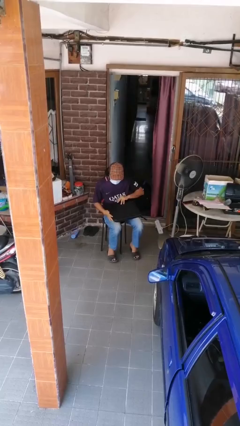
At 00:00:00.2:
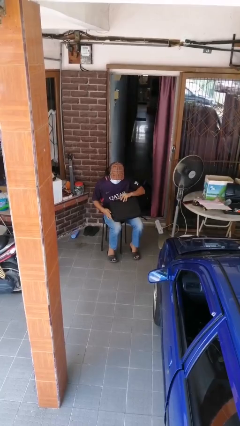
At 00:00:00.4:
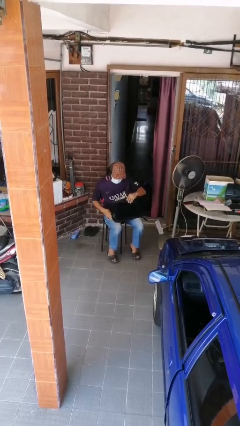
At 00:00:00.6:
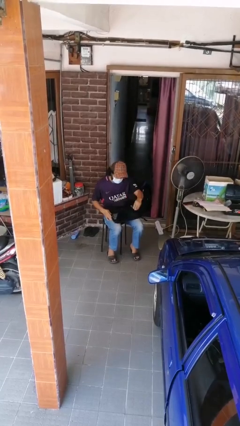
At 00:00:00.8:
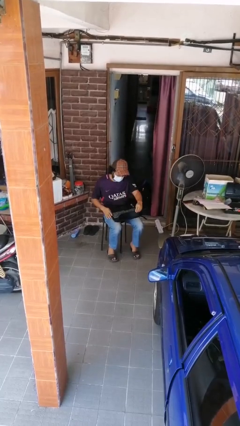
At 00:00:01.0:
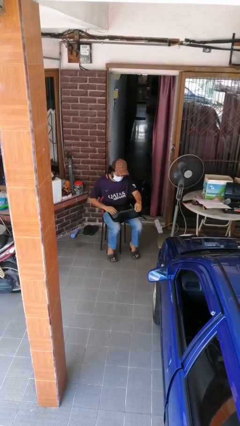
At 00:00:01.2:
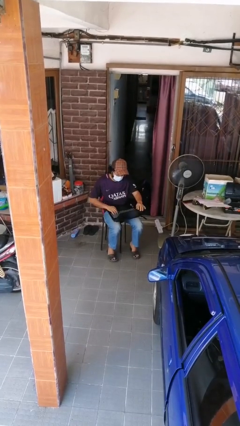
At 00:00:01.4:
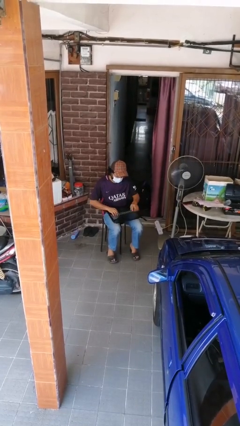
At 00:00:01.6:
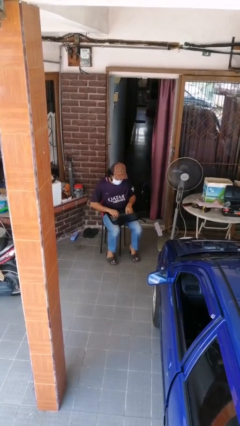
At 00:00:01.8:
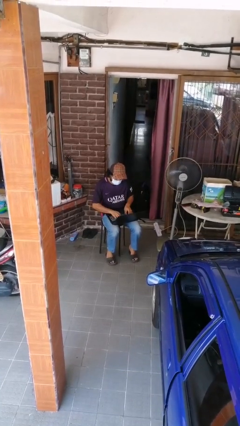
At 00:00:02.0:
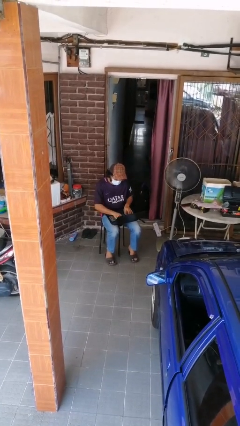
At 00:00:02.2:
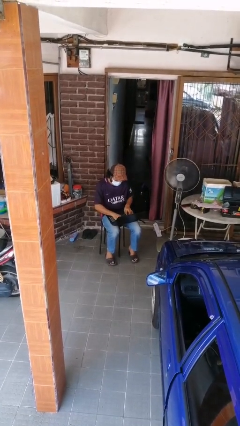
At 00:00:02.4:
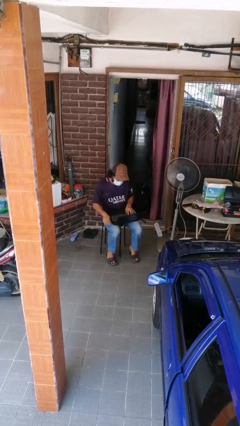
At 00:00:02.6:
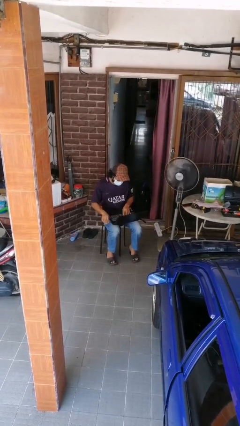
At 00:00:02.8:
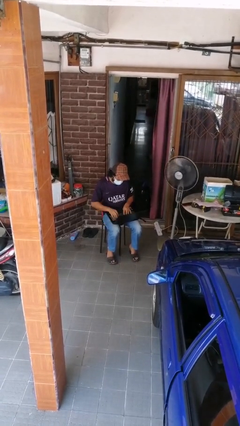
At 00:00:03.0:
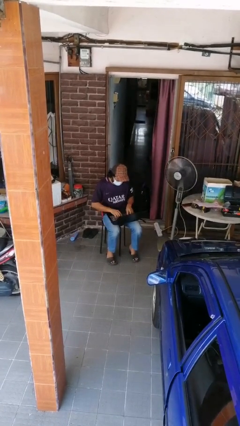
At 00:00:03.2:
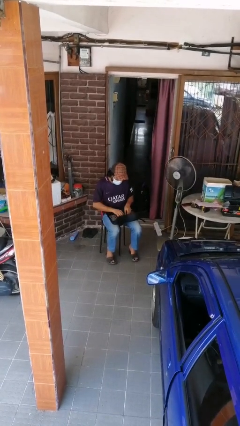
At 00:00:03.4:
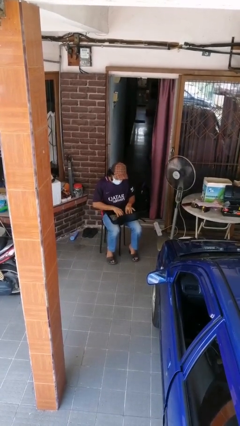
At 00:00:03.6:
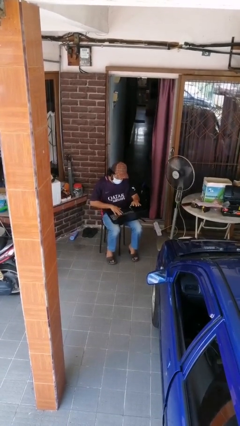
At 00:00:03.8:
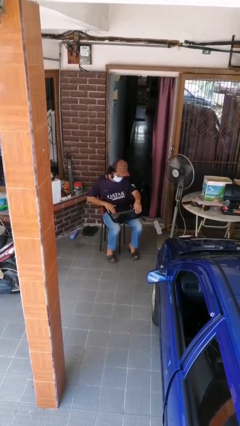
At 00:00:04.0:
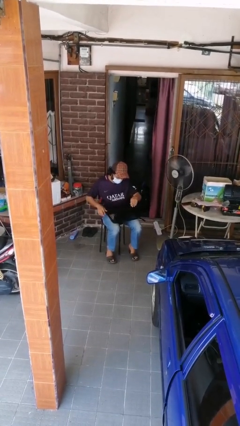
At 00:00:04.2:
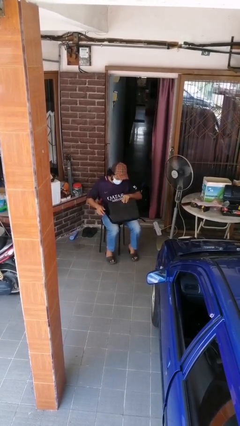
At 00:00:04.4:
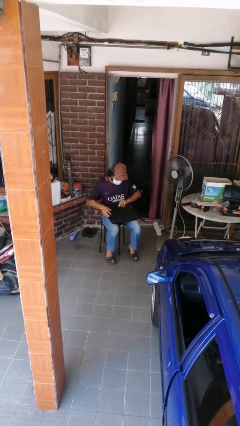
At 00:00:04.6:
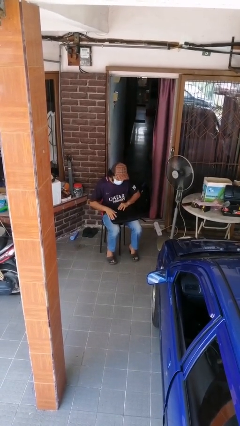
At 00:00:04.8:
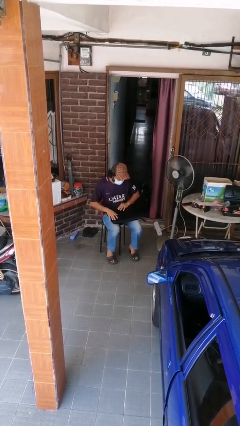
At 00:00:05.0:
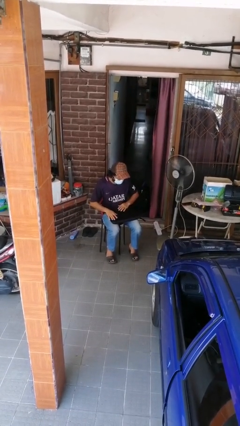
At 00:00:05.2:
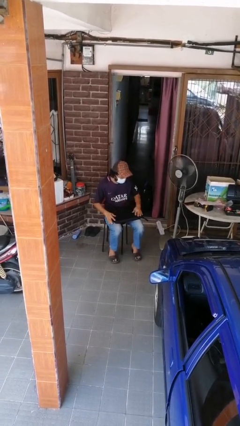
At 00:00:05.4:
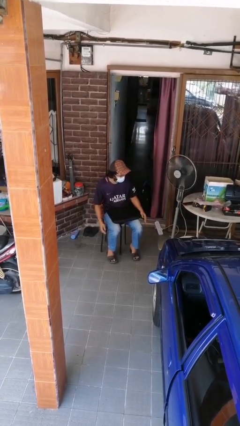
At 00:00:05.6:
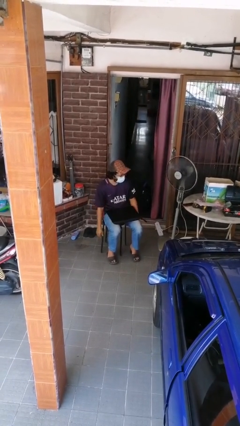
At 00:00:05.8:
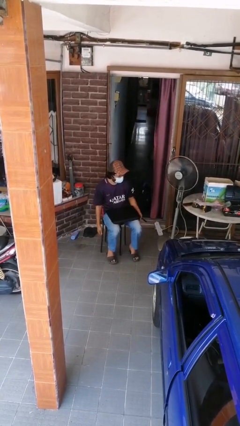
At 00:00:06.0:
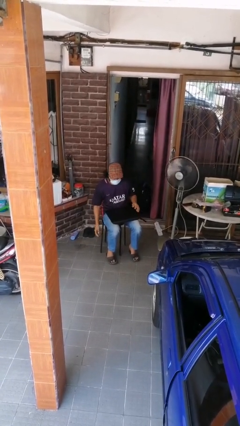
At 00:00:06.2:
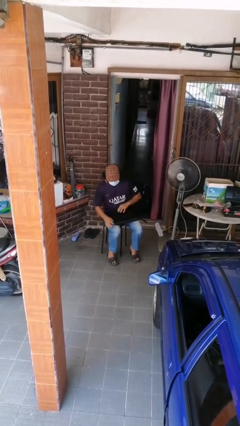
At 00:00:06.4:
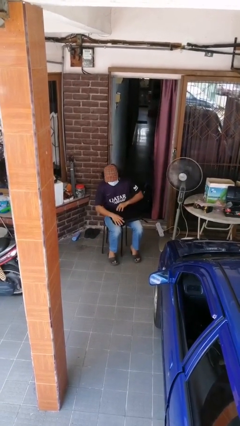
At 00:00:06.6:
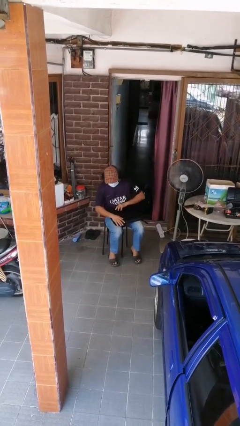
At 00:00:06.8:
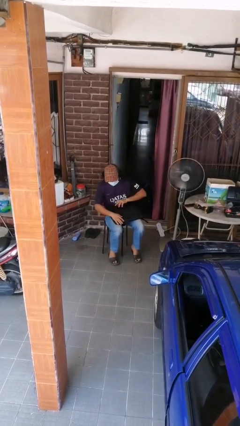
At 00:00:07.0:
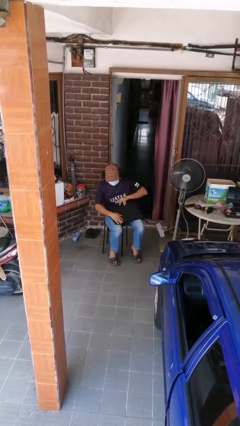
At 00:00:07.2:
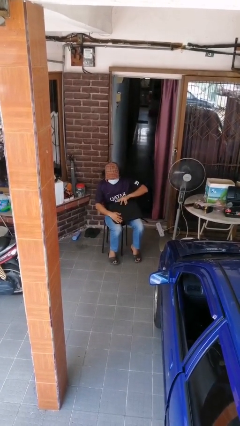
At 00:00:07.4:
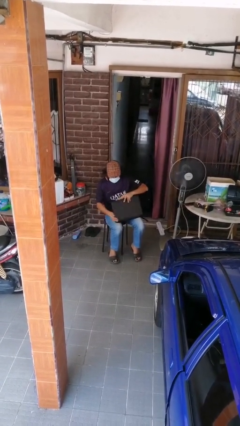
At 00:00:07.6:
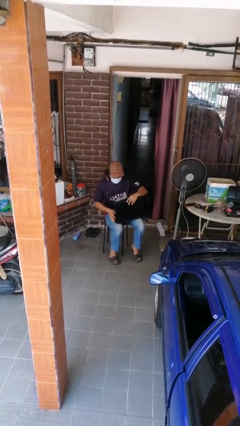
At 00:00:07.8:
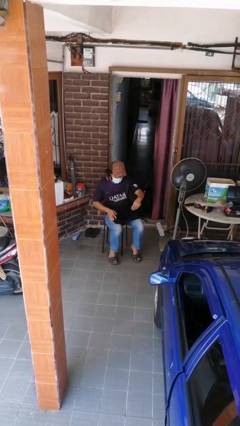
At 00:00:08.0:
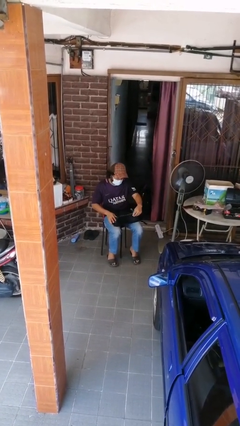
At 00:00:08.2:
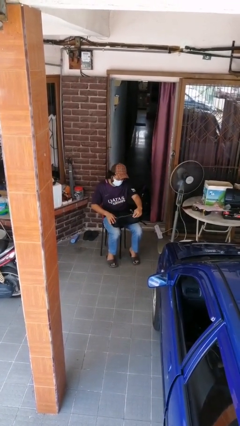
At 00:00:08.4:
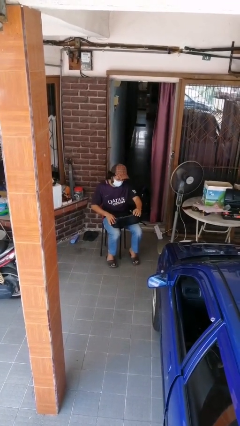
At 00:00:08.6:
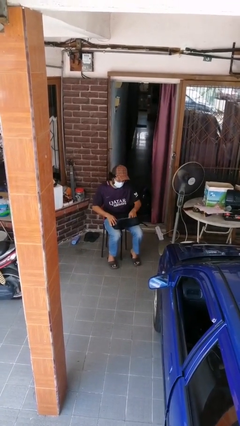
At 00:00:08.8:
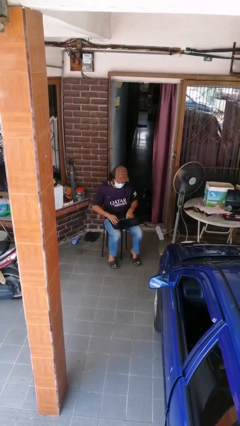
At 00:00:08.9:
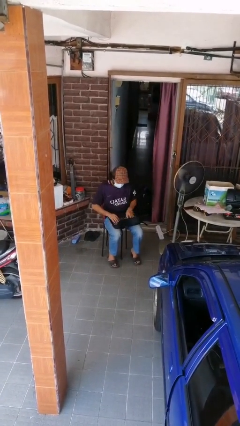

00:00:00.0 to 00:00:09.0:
person interacts with laptop

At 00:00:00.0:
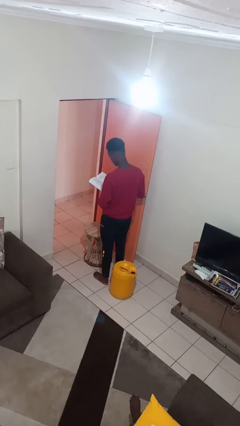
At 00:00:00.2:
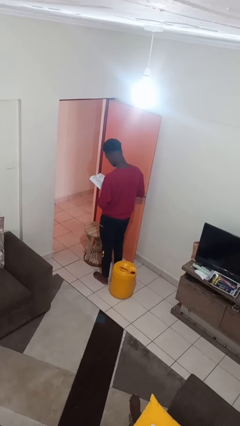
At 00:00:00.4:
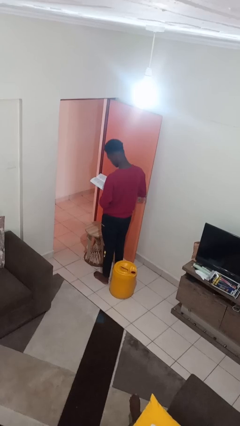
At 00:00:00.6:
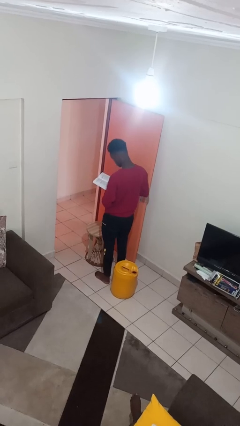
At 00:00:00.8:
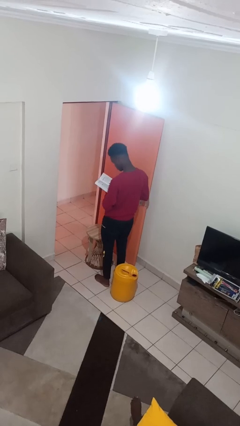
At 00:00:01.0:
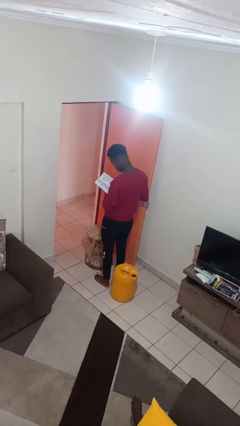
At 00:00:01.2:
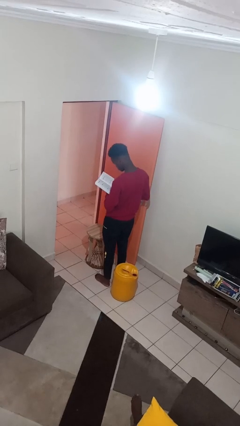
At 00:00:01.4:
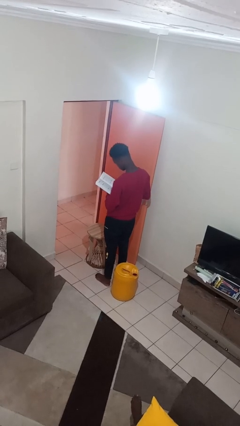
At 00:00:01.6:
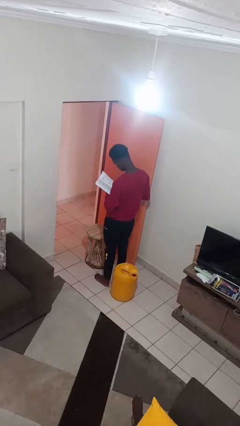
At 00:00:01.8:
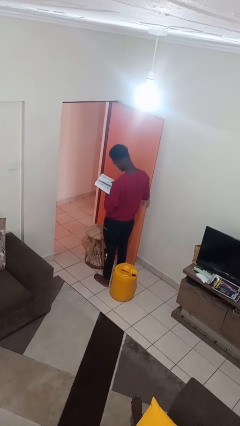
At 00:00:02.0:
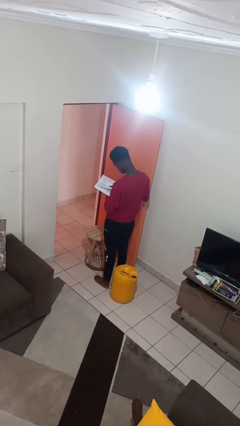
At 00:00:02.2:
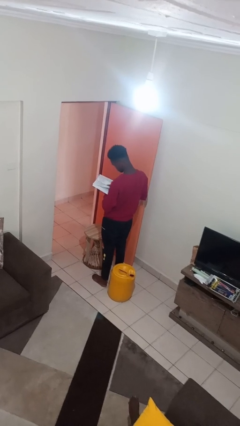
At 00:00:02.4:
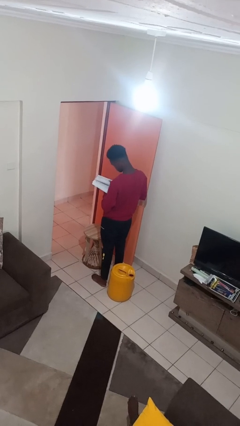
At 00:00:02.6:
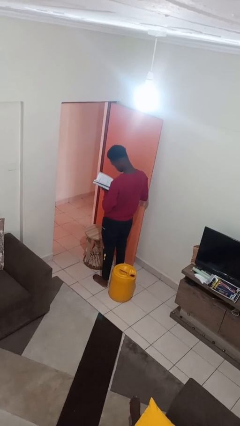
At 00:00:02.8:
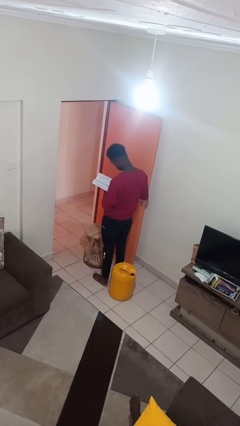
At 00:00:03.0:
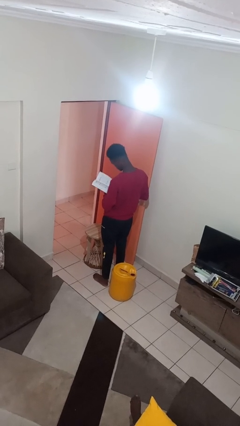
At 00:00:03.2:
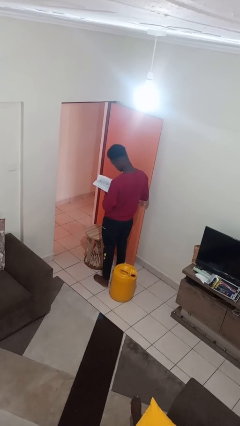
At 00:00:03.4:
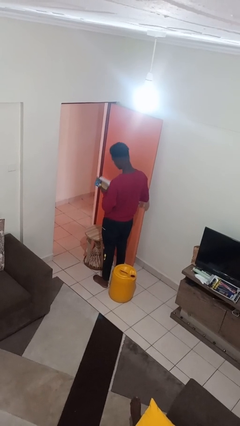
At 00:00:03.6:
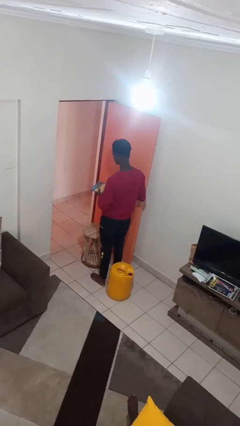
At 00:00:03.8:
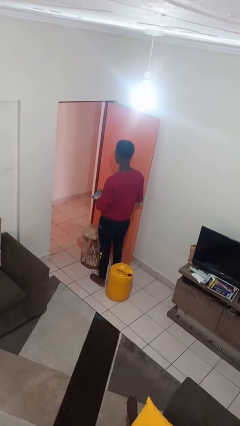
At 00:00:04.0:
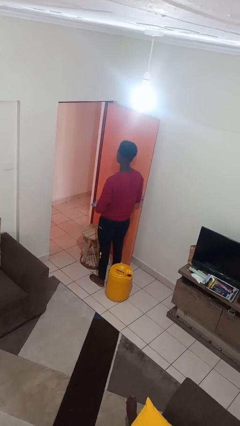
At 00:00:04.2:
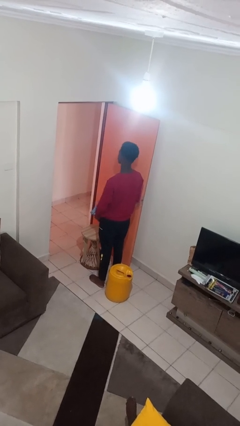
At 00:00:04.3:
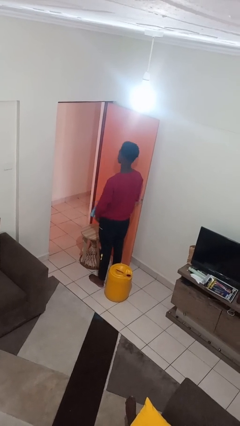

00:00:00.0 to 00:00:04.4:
person reads book

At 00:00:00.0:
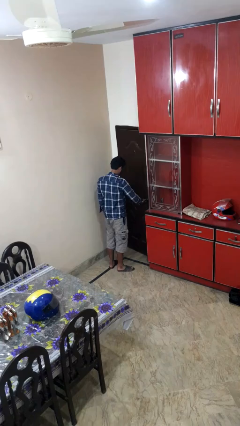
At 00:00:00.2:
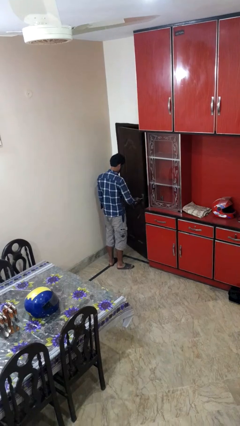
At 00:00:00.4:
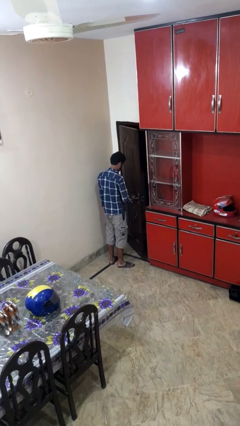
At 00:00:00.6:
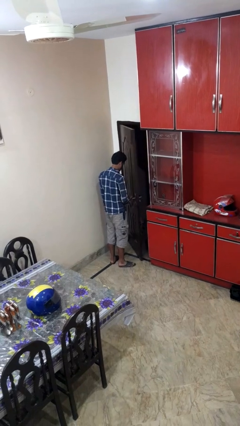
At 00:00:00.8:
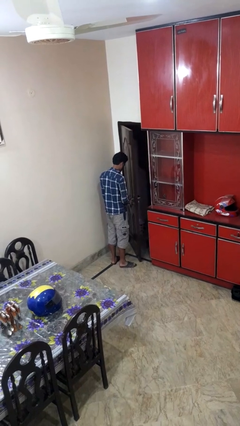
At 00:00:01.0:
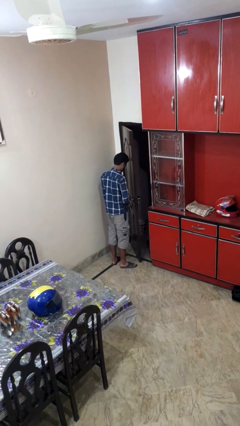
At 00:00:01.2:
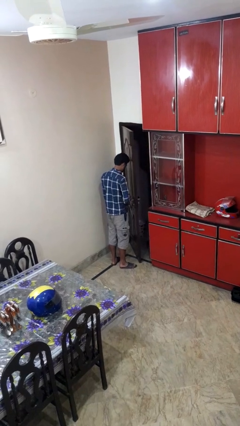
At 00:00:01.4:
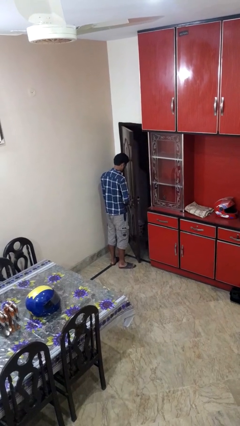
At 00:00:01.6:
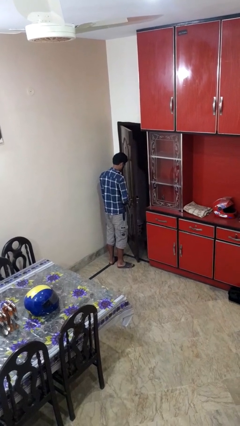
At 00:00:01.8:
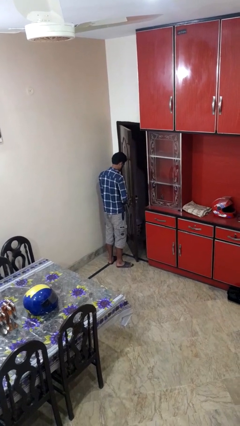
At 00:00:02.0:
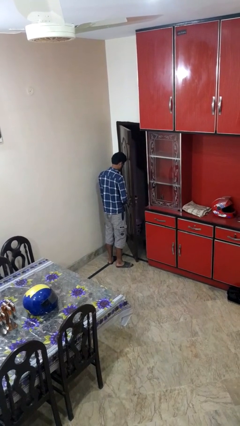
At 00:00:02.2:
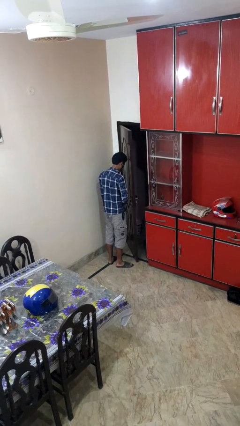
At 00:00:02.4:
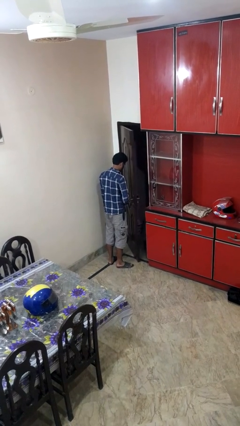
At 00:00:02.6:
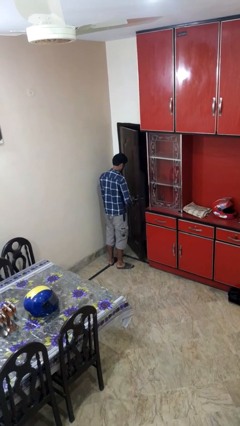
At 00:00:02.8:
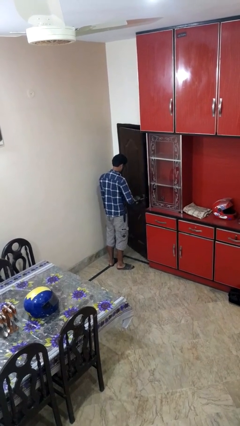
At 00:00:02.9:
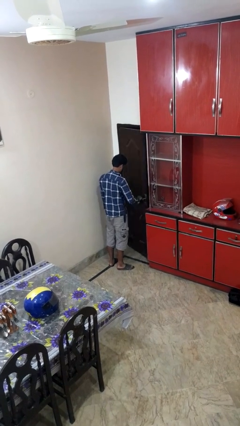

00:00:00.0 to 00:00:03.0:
person opens facility door

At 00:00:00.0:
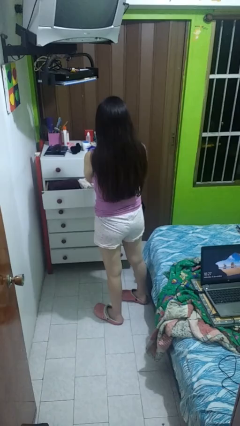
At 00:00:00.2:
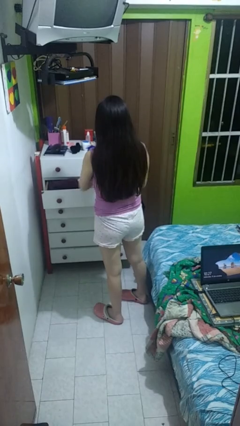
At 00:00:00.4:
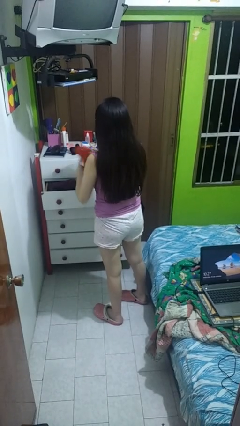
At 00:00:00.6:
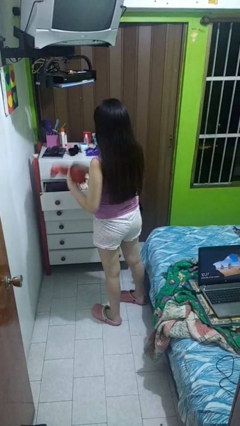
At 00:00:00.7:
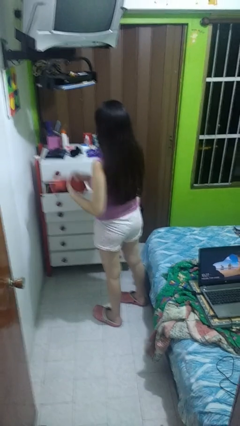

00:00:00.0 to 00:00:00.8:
person takes clothes from dresser
